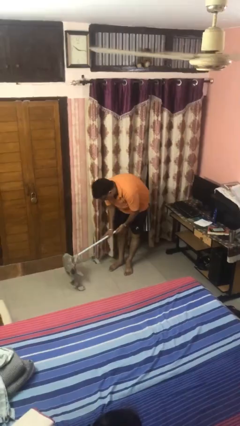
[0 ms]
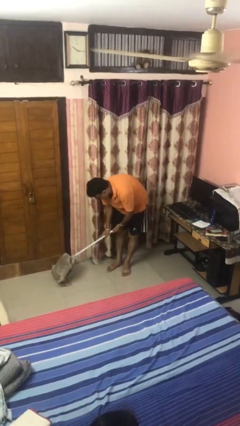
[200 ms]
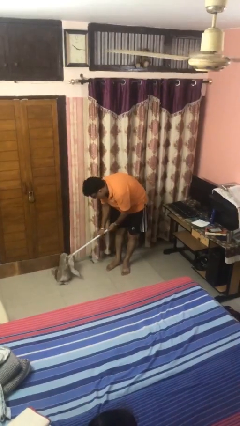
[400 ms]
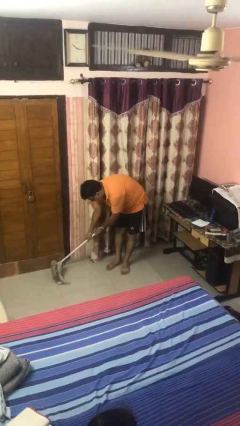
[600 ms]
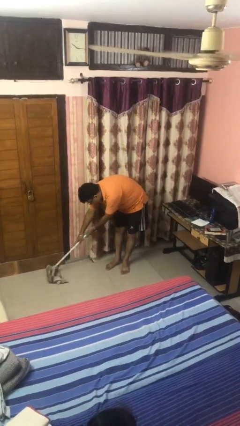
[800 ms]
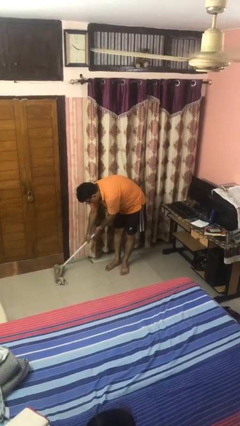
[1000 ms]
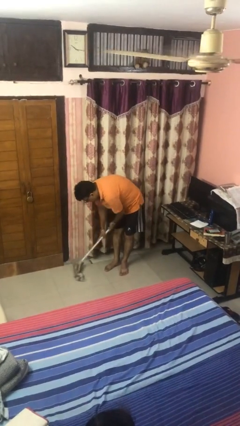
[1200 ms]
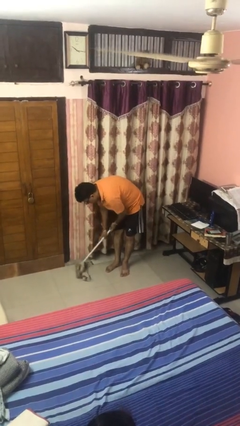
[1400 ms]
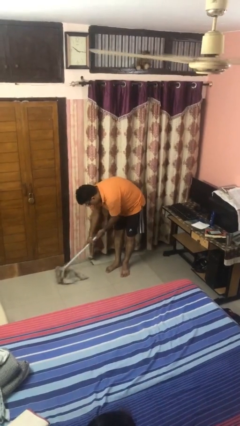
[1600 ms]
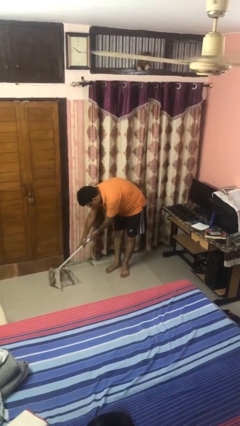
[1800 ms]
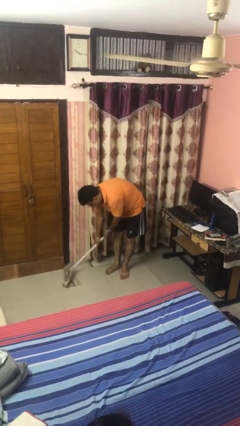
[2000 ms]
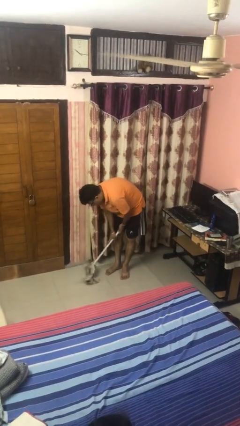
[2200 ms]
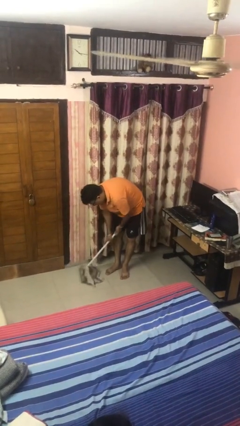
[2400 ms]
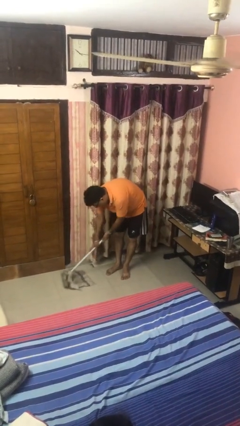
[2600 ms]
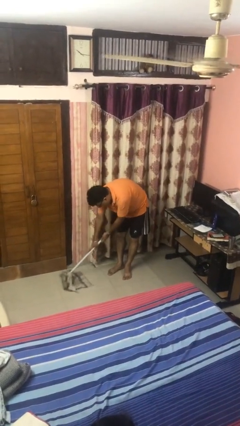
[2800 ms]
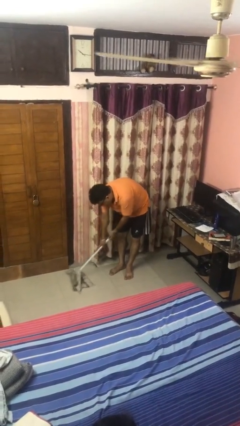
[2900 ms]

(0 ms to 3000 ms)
person mops

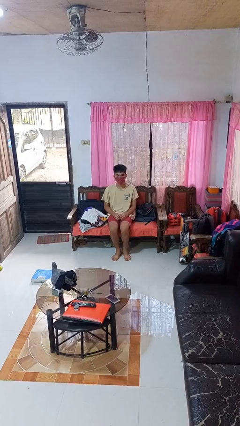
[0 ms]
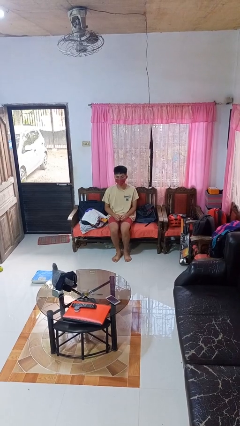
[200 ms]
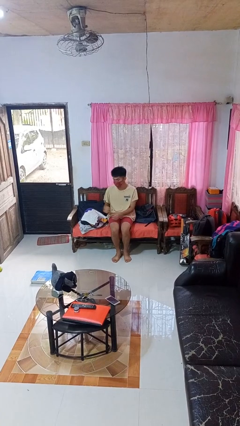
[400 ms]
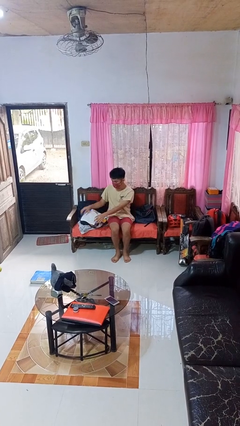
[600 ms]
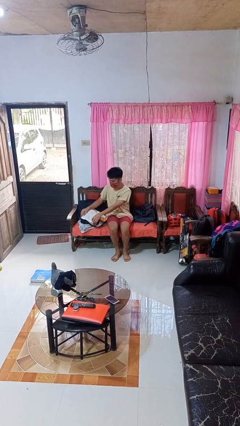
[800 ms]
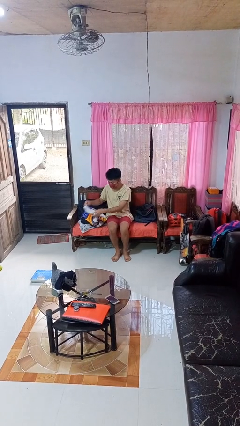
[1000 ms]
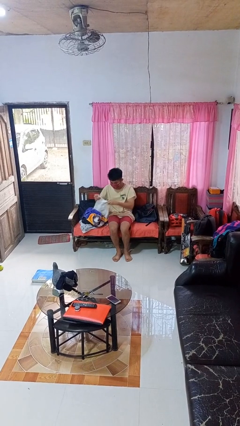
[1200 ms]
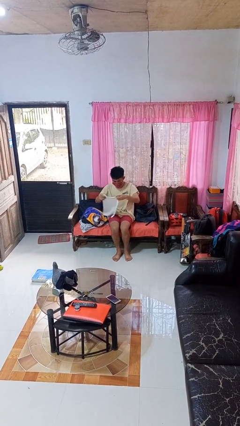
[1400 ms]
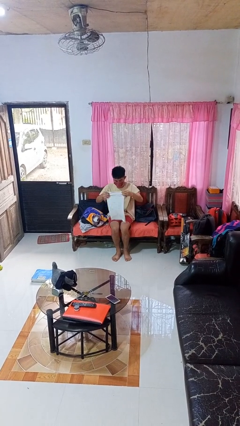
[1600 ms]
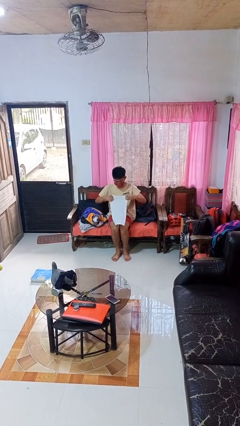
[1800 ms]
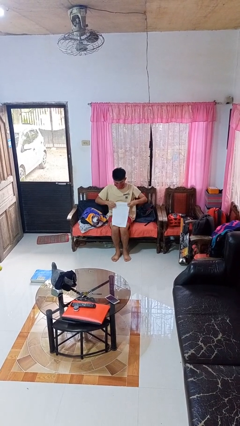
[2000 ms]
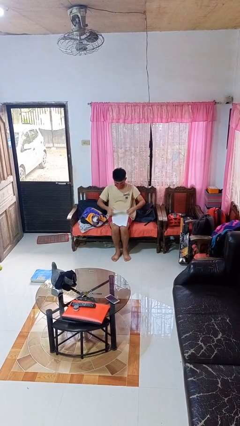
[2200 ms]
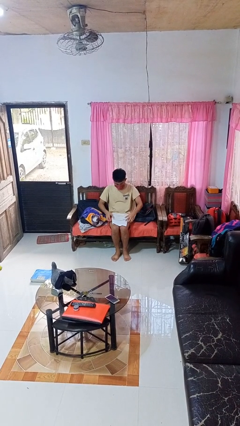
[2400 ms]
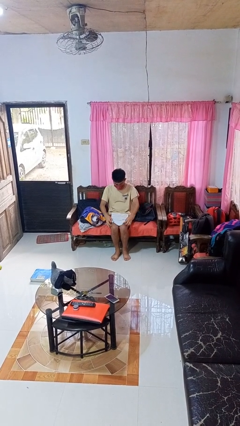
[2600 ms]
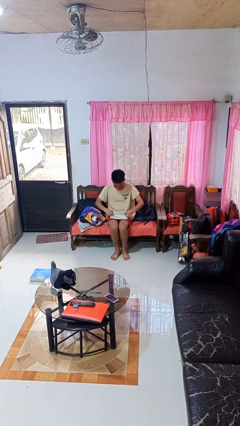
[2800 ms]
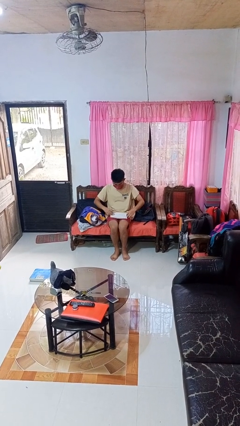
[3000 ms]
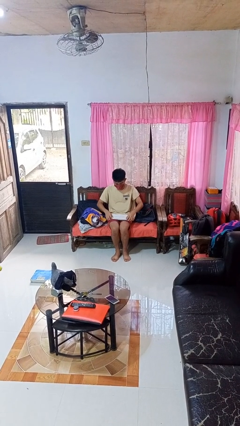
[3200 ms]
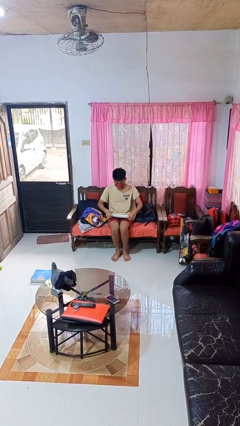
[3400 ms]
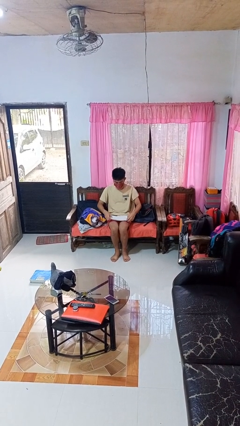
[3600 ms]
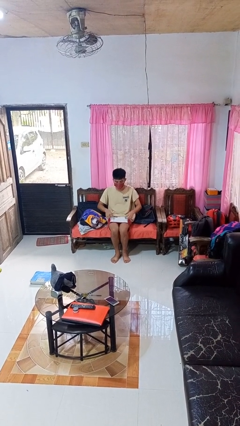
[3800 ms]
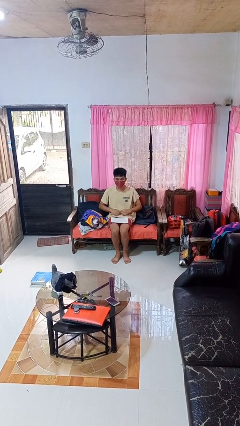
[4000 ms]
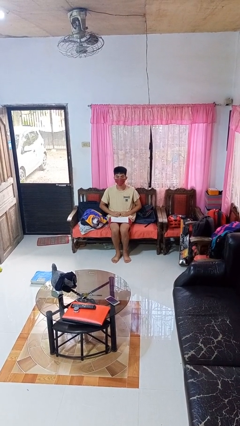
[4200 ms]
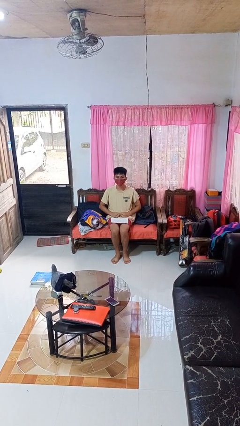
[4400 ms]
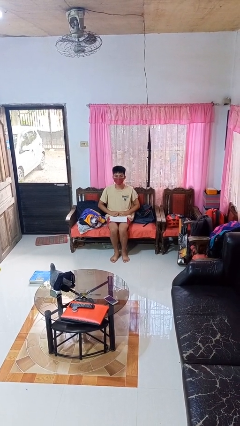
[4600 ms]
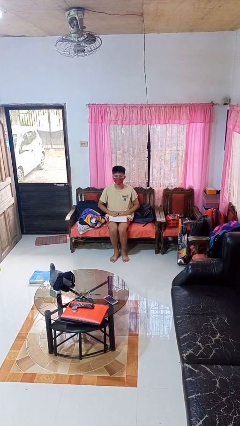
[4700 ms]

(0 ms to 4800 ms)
person folds towel

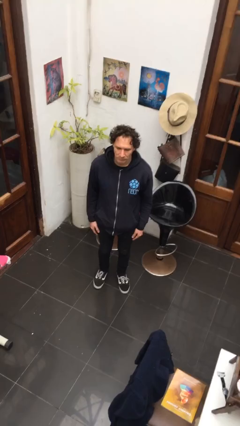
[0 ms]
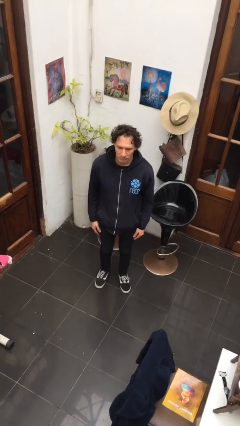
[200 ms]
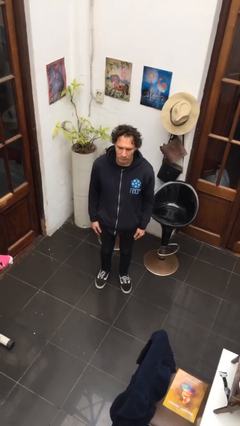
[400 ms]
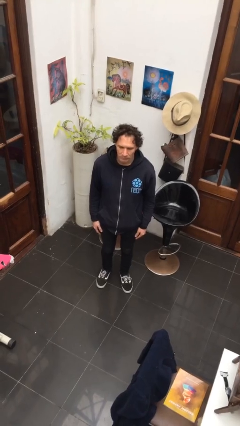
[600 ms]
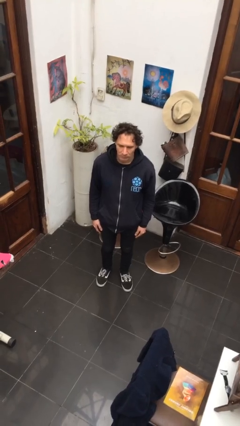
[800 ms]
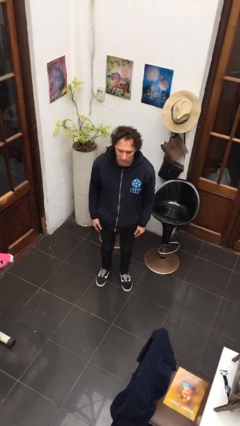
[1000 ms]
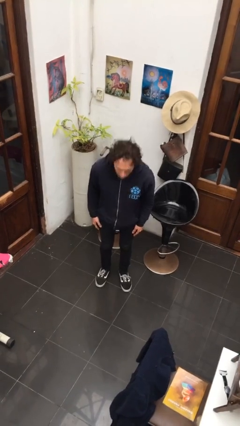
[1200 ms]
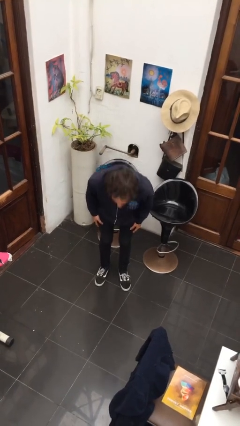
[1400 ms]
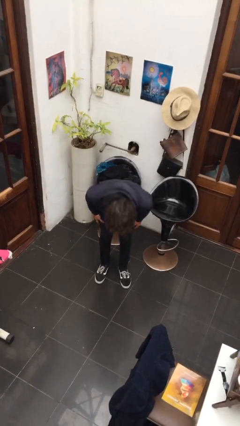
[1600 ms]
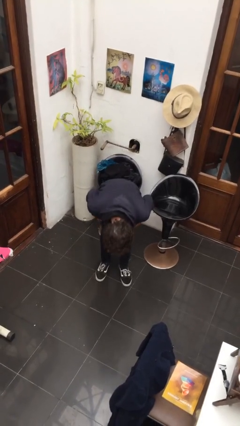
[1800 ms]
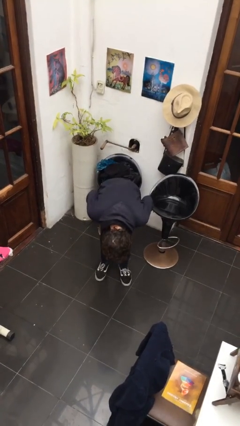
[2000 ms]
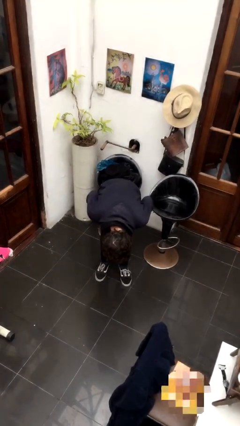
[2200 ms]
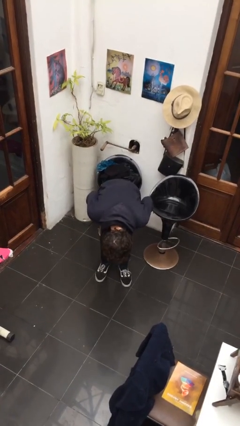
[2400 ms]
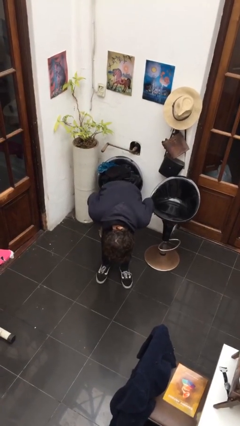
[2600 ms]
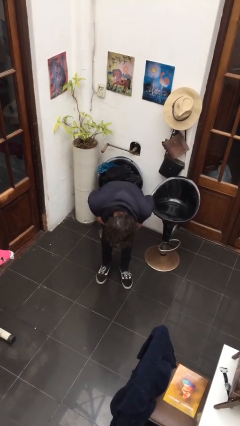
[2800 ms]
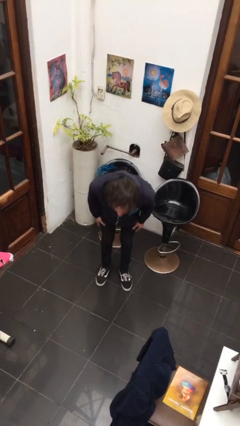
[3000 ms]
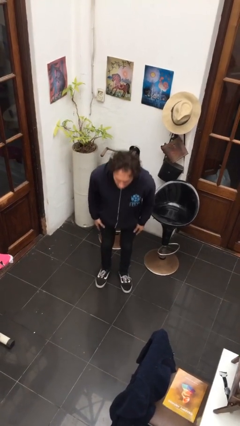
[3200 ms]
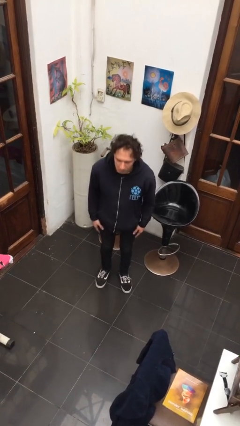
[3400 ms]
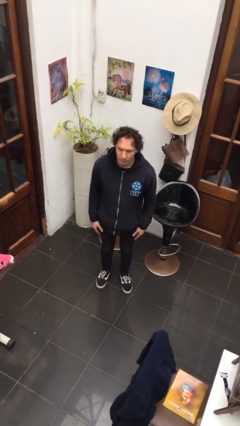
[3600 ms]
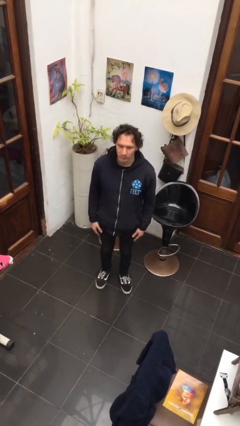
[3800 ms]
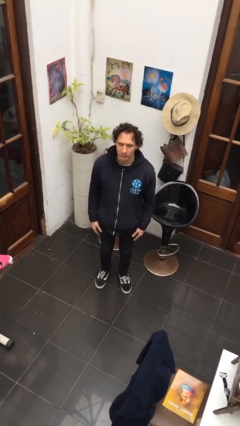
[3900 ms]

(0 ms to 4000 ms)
person bows

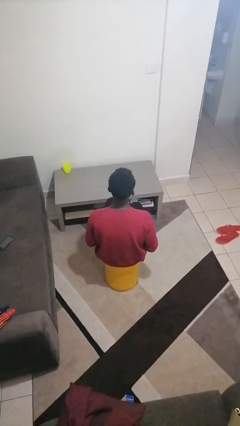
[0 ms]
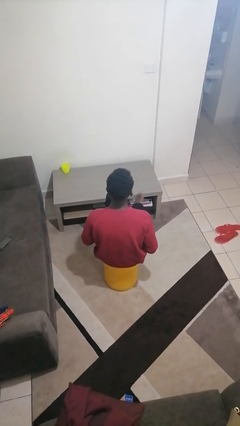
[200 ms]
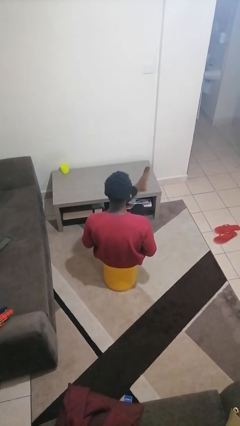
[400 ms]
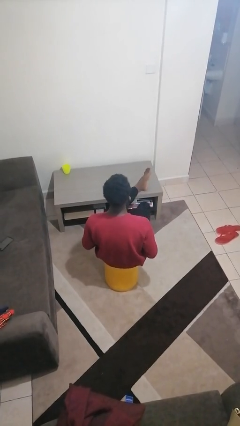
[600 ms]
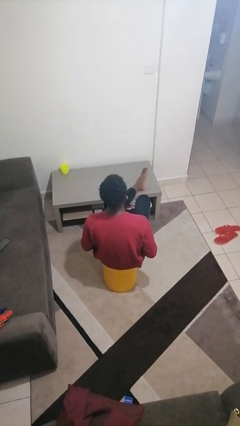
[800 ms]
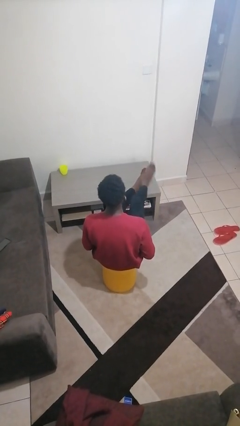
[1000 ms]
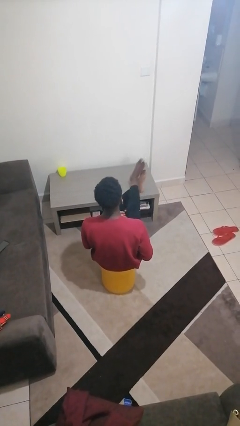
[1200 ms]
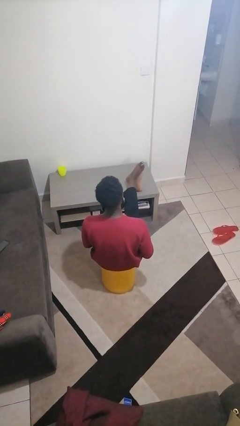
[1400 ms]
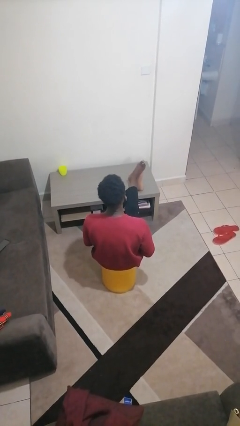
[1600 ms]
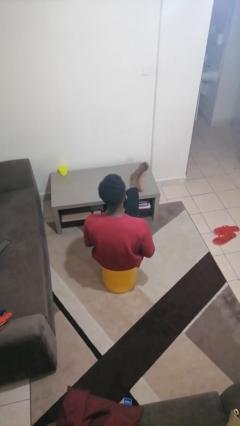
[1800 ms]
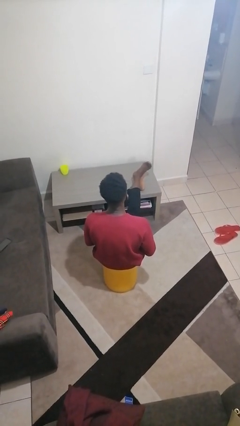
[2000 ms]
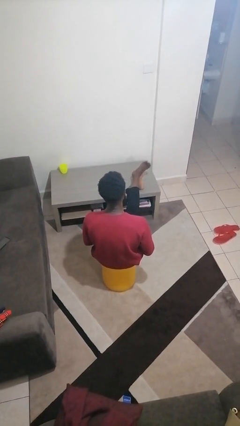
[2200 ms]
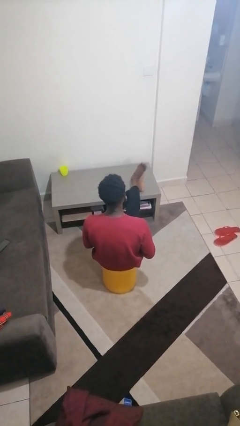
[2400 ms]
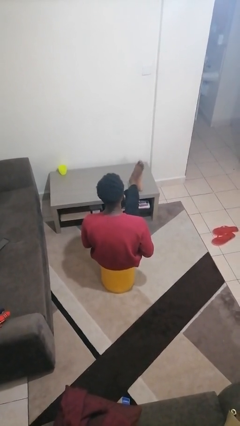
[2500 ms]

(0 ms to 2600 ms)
person puts feet up

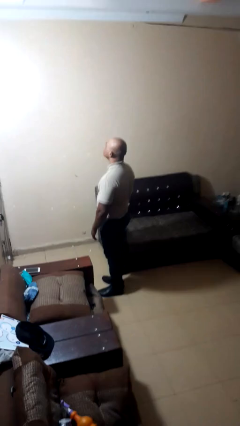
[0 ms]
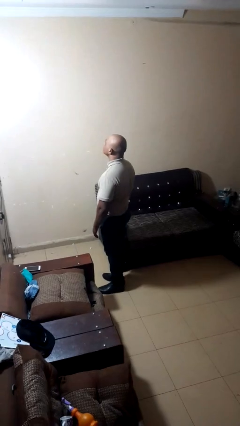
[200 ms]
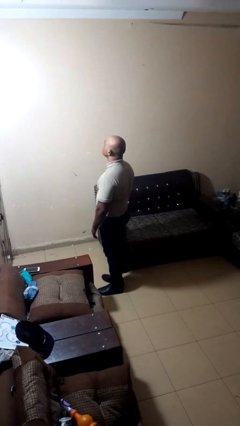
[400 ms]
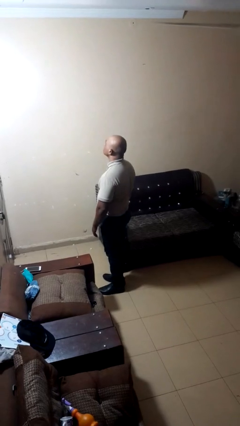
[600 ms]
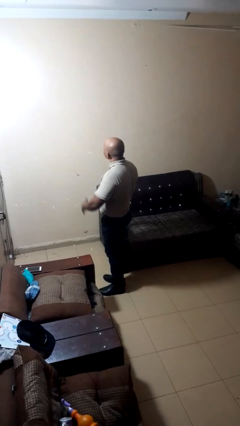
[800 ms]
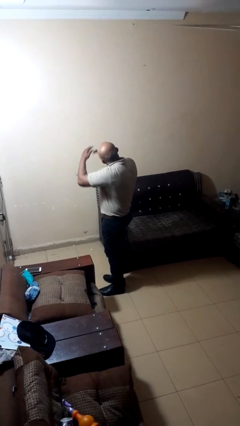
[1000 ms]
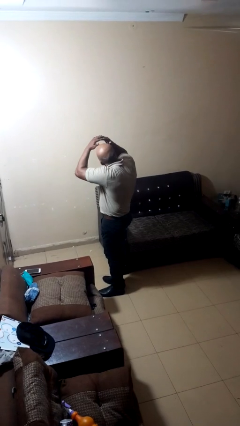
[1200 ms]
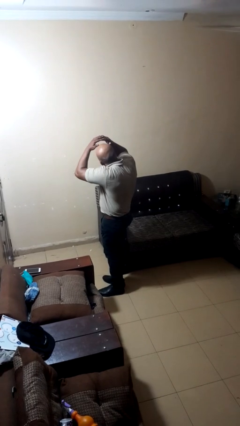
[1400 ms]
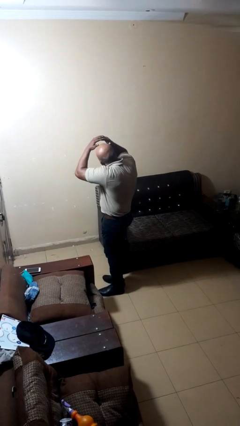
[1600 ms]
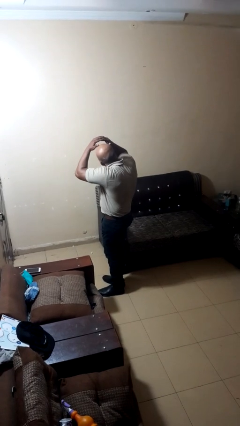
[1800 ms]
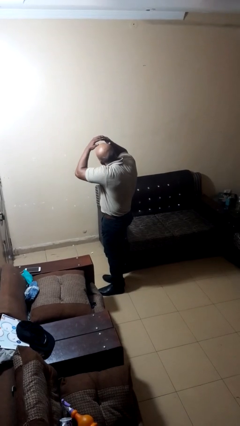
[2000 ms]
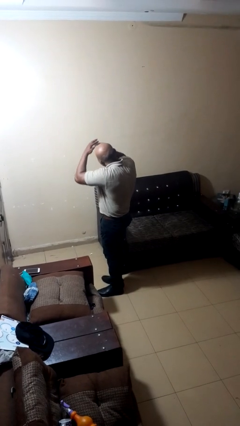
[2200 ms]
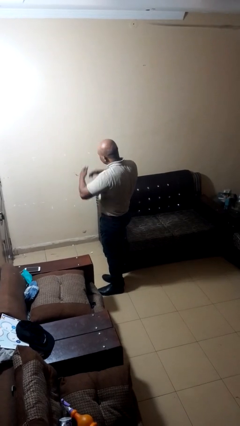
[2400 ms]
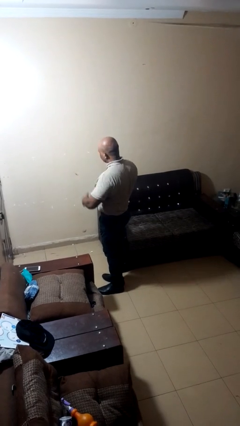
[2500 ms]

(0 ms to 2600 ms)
person shades eyes

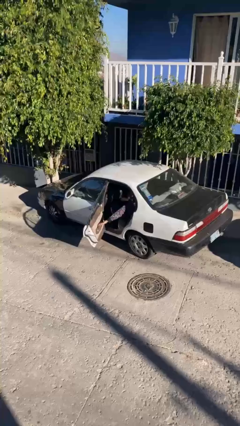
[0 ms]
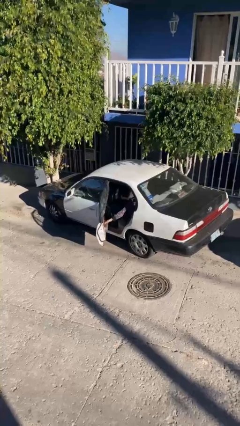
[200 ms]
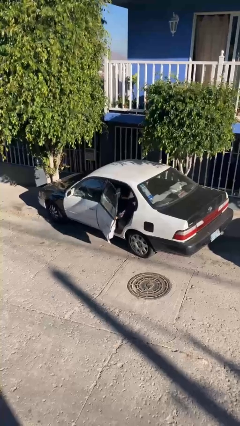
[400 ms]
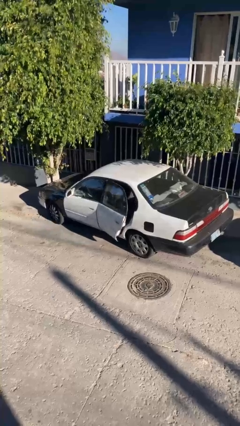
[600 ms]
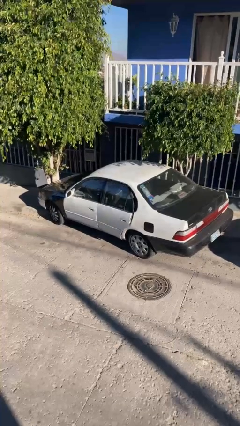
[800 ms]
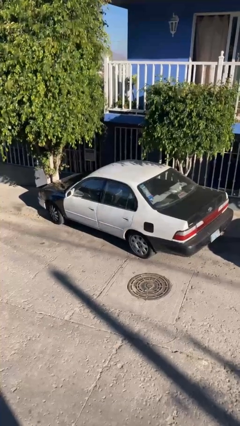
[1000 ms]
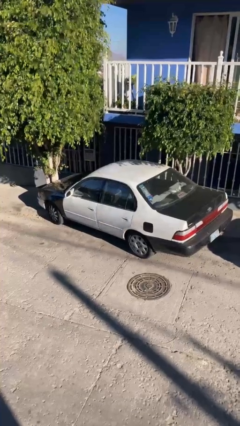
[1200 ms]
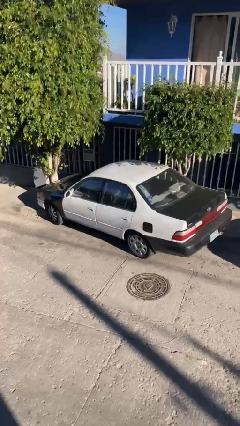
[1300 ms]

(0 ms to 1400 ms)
person closes car door
